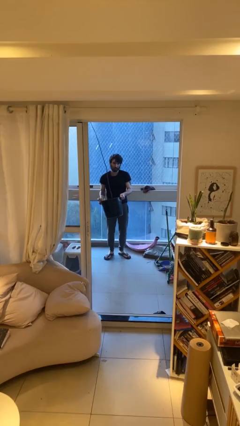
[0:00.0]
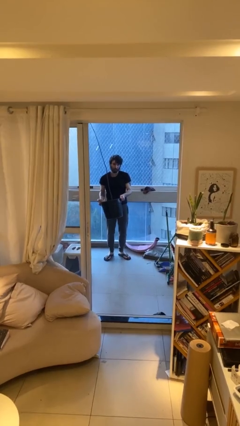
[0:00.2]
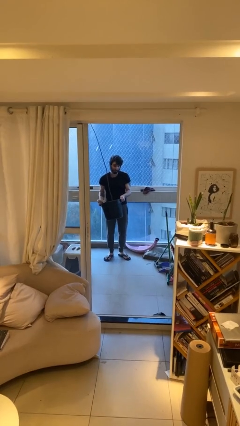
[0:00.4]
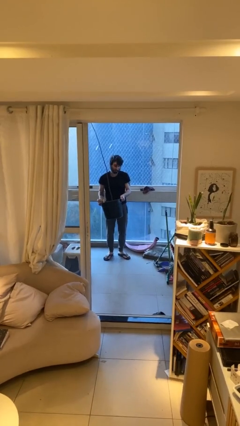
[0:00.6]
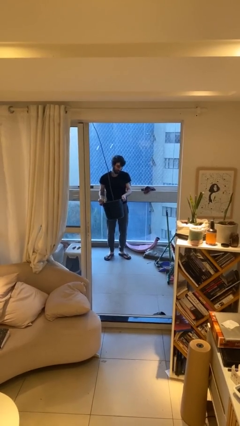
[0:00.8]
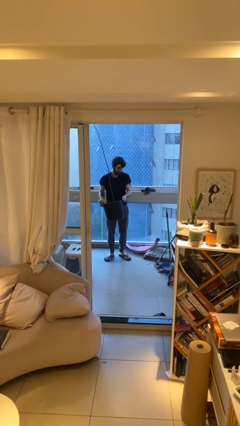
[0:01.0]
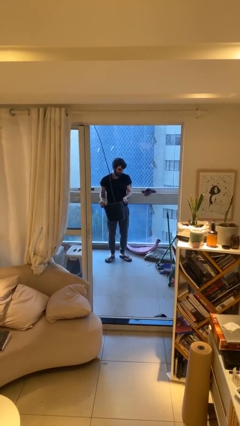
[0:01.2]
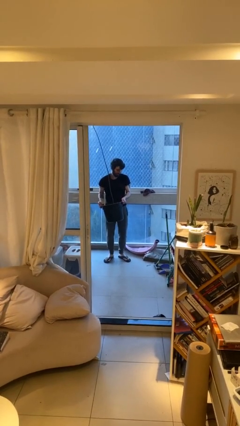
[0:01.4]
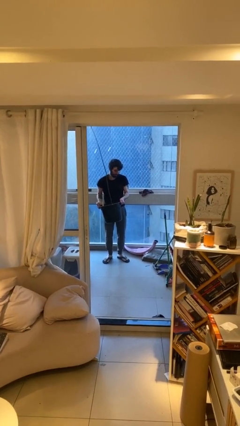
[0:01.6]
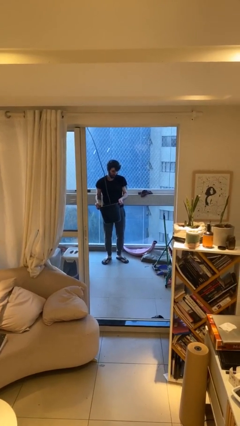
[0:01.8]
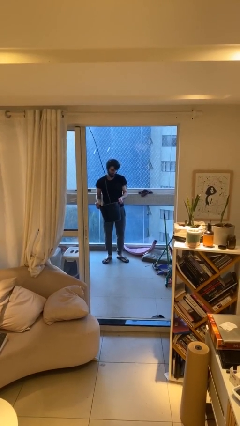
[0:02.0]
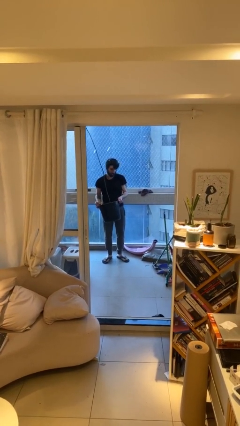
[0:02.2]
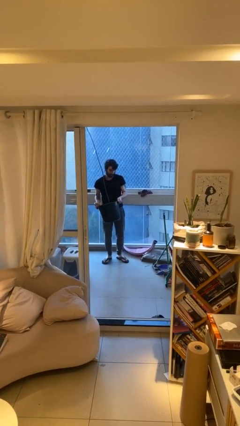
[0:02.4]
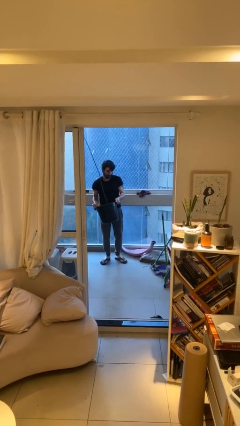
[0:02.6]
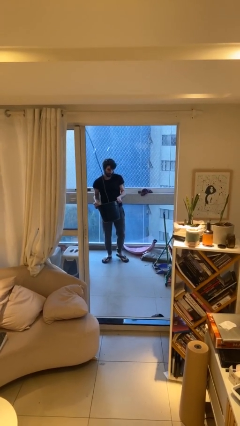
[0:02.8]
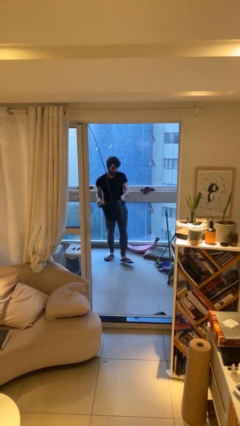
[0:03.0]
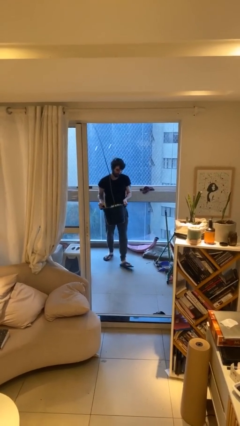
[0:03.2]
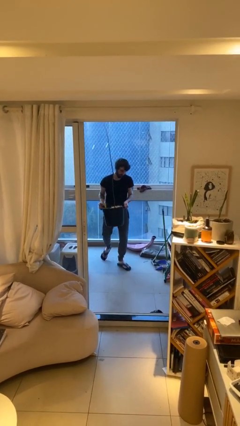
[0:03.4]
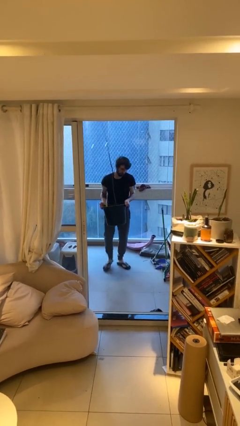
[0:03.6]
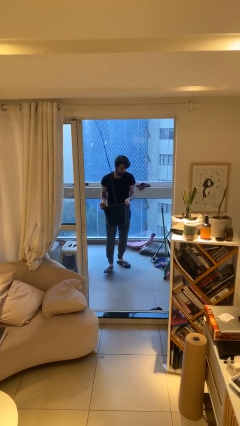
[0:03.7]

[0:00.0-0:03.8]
person carries heavy object

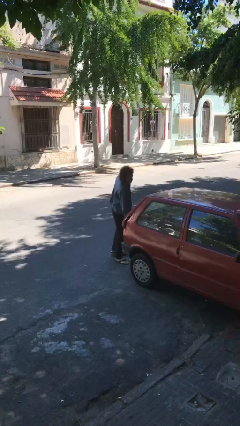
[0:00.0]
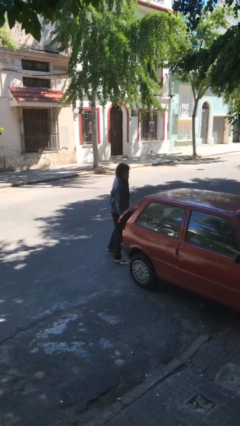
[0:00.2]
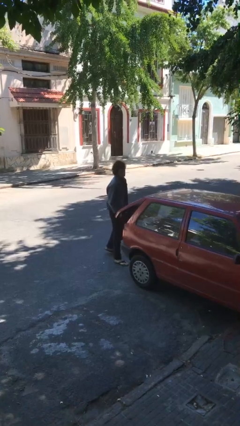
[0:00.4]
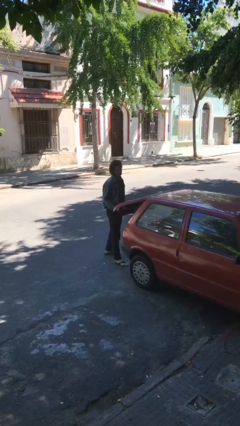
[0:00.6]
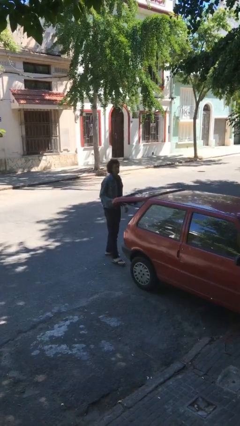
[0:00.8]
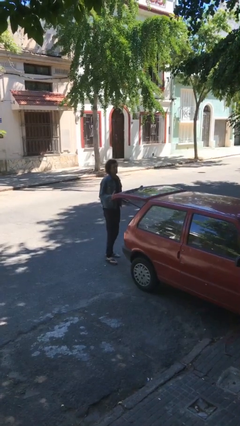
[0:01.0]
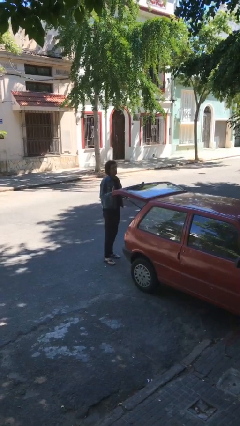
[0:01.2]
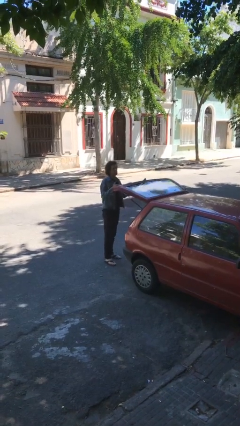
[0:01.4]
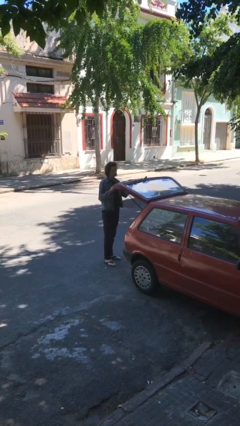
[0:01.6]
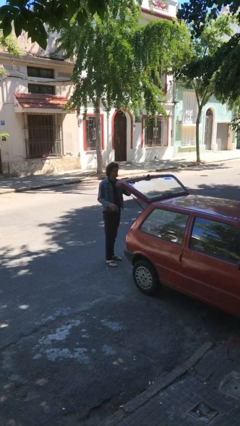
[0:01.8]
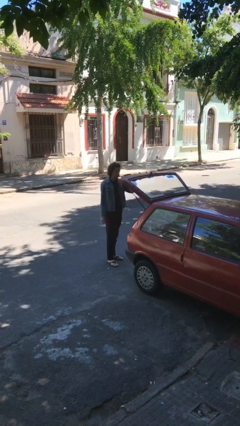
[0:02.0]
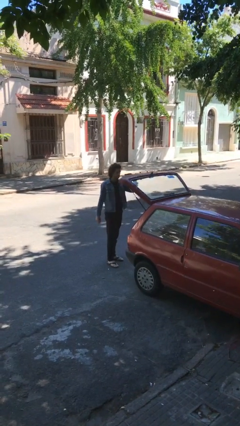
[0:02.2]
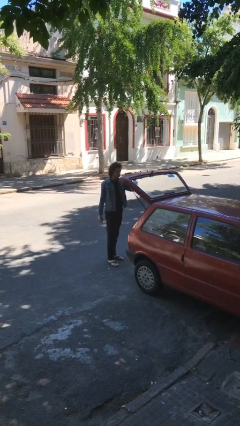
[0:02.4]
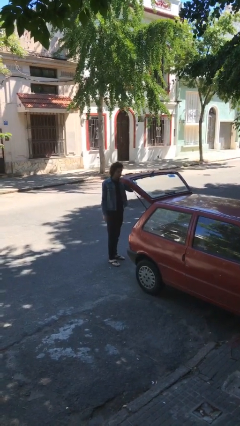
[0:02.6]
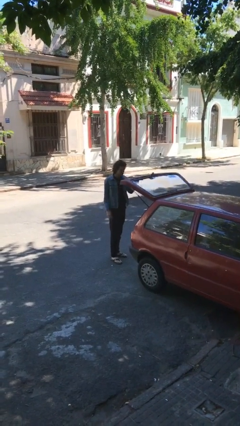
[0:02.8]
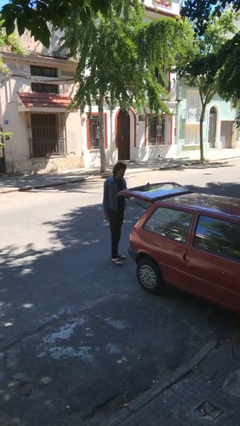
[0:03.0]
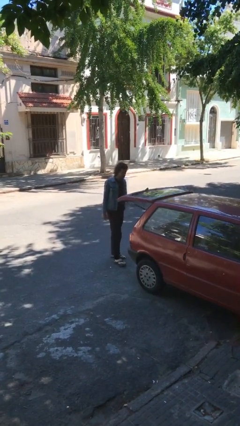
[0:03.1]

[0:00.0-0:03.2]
person opens car trunk

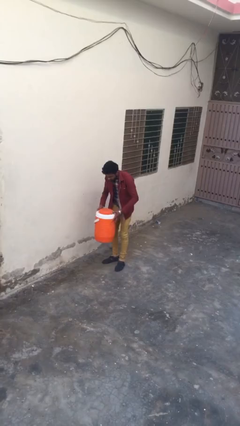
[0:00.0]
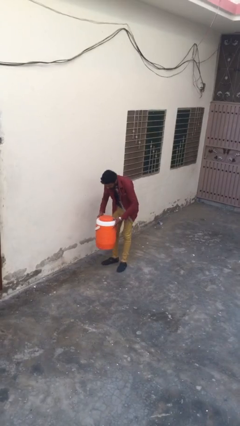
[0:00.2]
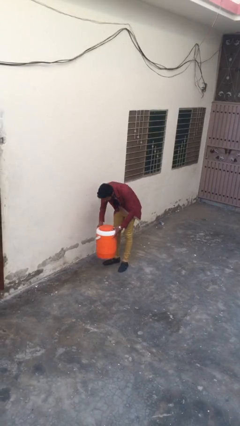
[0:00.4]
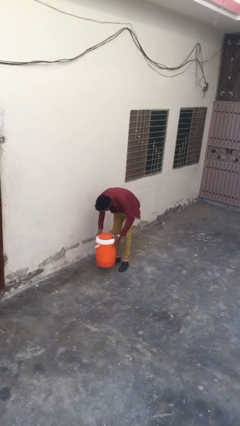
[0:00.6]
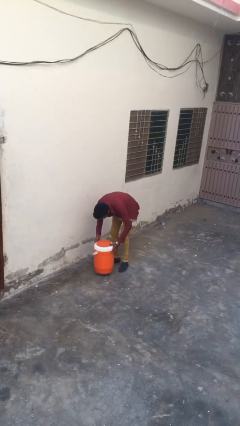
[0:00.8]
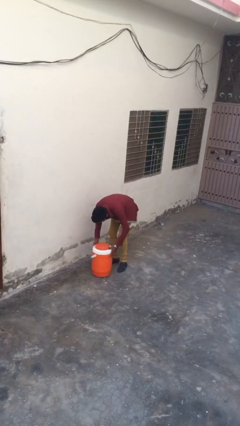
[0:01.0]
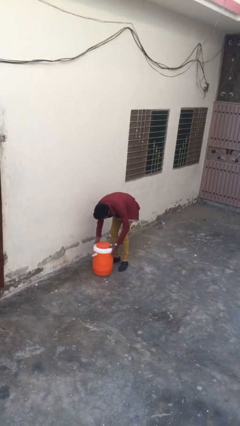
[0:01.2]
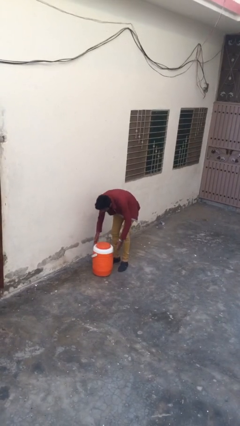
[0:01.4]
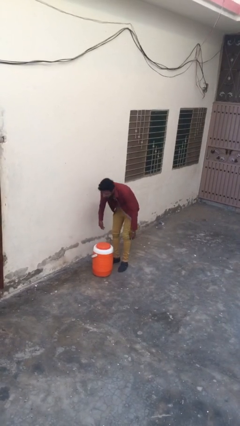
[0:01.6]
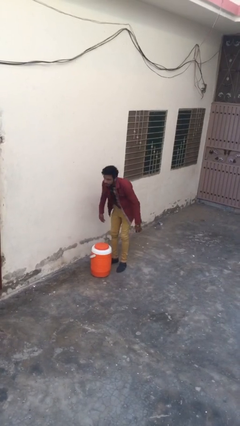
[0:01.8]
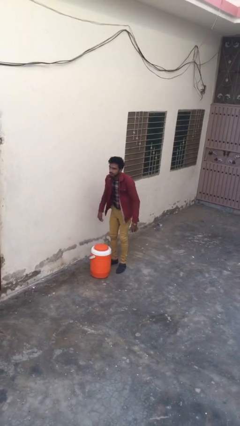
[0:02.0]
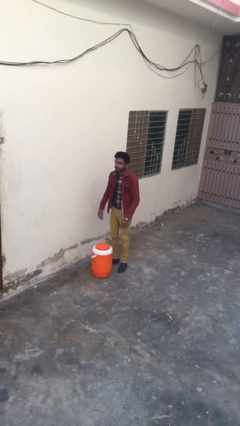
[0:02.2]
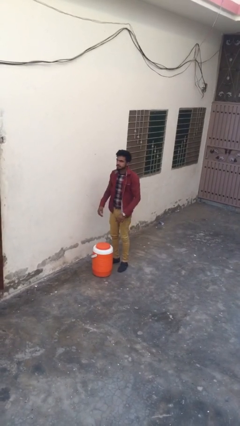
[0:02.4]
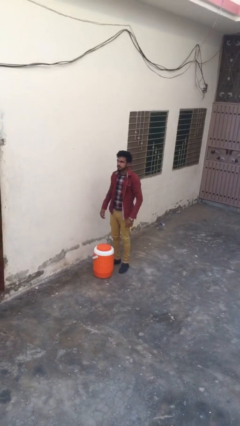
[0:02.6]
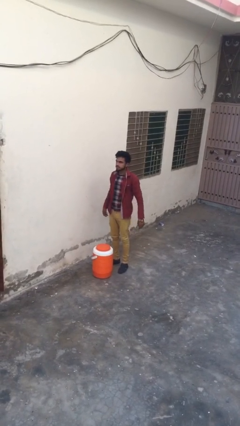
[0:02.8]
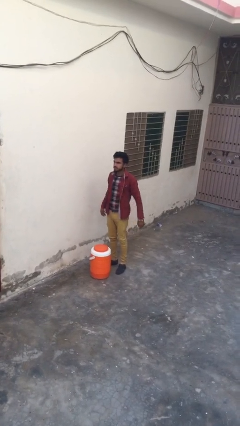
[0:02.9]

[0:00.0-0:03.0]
person puts down object on floor

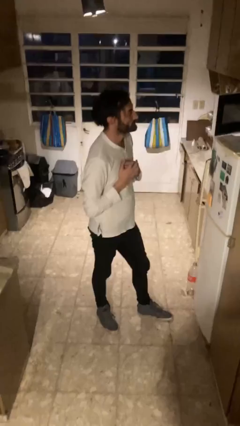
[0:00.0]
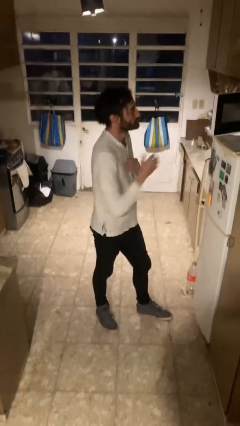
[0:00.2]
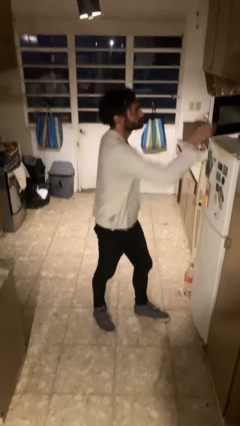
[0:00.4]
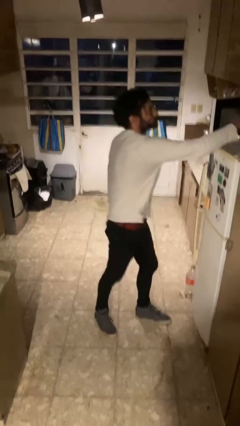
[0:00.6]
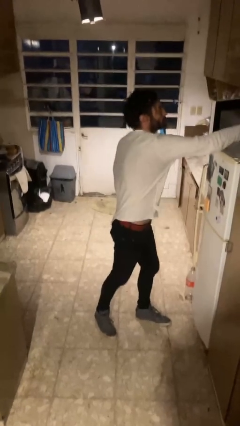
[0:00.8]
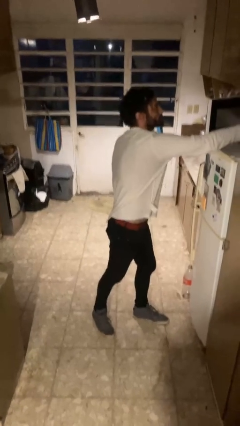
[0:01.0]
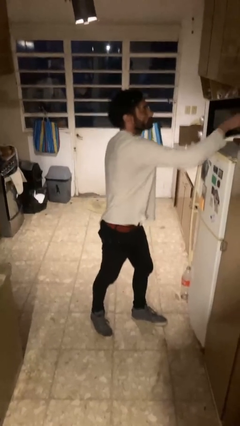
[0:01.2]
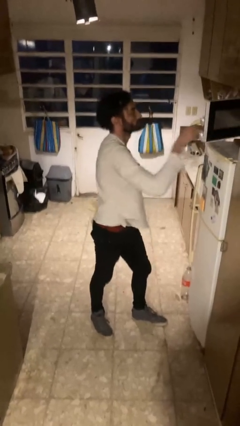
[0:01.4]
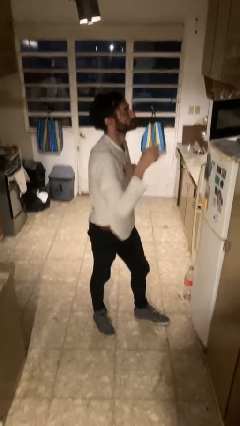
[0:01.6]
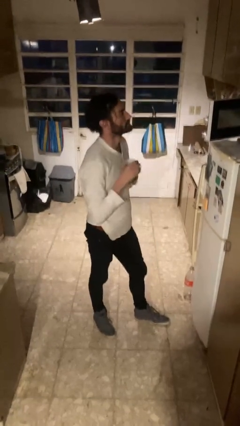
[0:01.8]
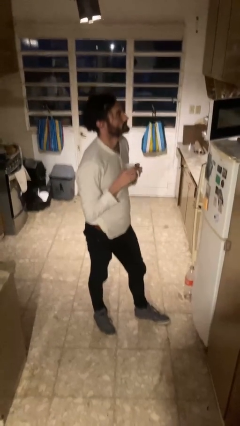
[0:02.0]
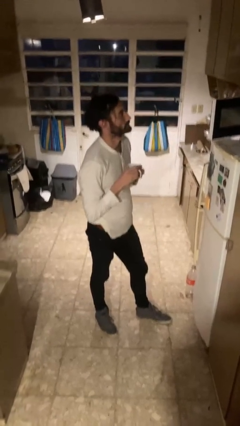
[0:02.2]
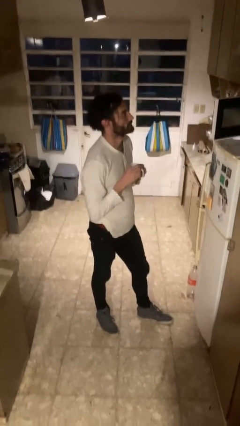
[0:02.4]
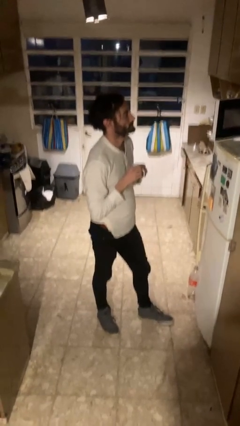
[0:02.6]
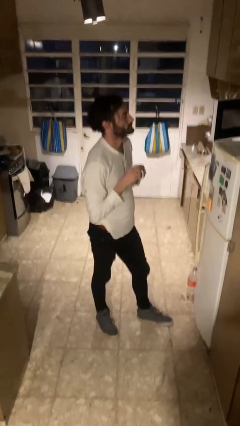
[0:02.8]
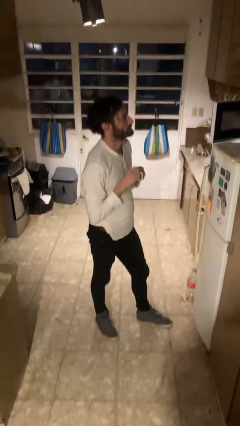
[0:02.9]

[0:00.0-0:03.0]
person takes object from microwave

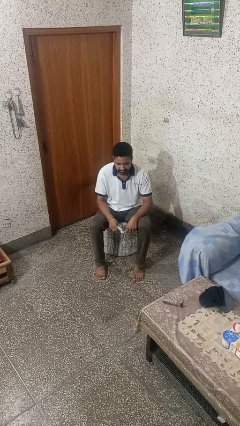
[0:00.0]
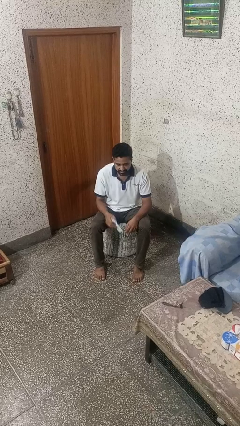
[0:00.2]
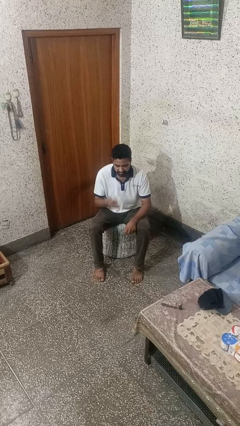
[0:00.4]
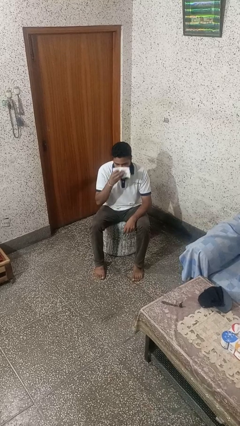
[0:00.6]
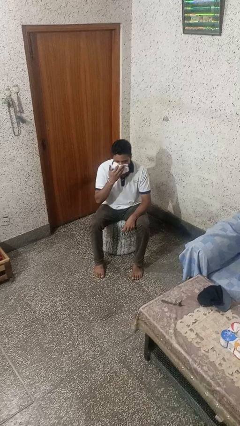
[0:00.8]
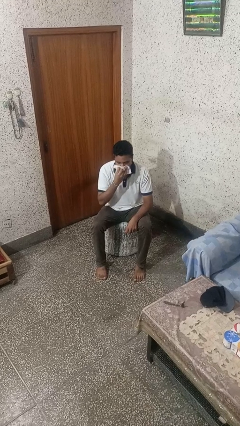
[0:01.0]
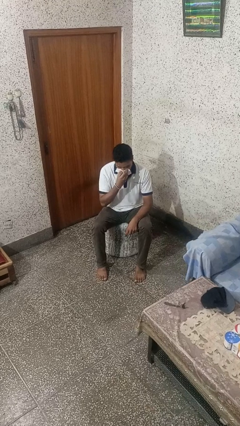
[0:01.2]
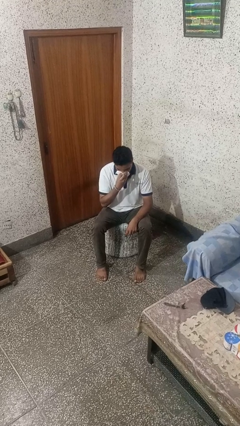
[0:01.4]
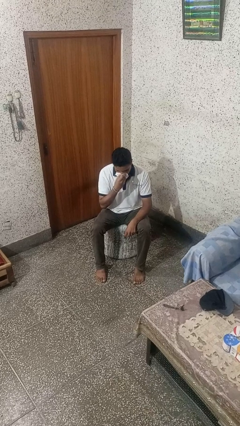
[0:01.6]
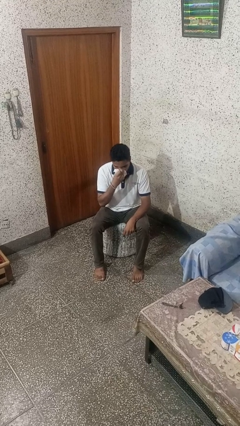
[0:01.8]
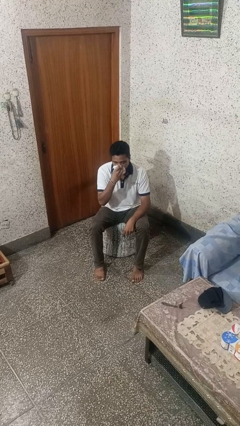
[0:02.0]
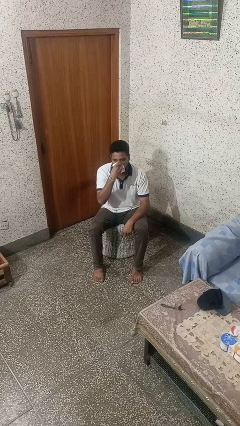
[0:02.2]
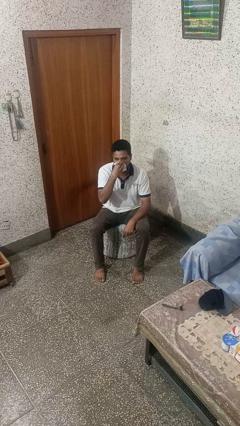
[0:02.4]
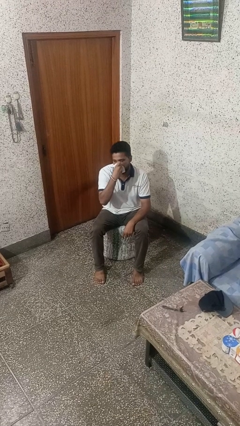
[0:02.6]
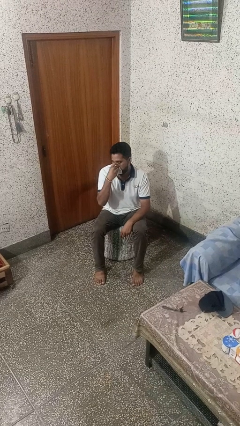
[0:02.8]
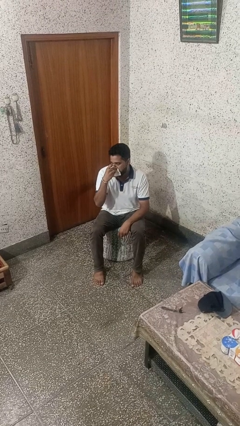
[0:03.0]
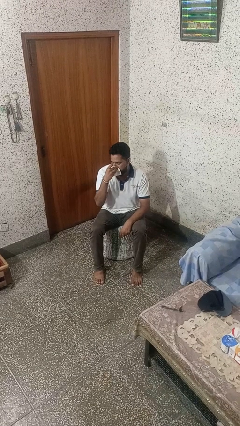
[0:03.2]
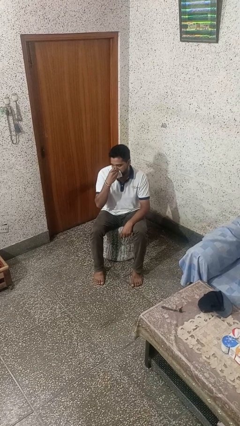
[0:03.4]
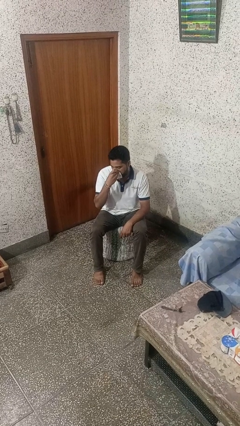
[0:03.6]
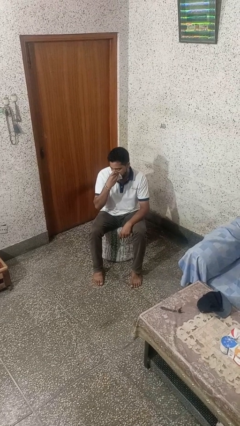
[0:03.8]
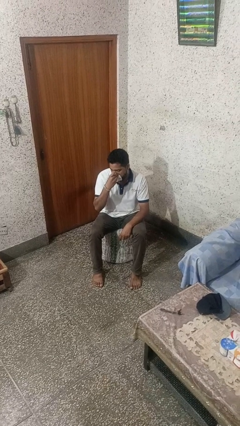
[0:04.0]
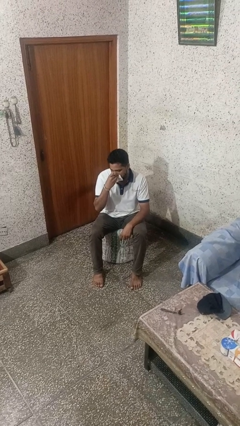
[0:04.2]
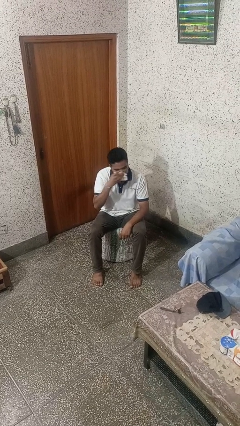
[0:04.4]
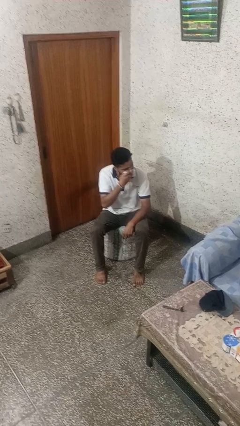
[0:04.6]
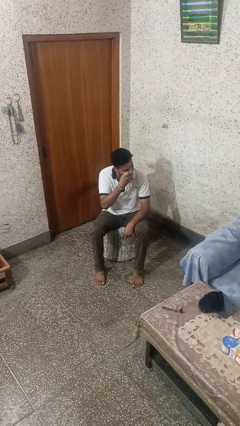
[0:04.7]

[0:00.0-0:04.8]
person blows nose
